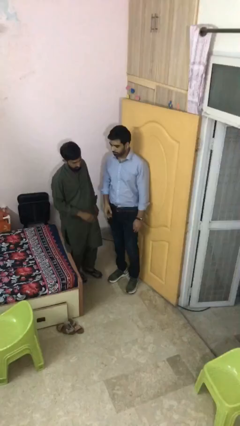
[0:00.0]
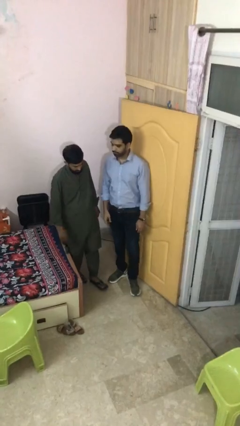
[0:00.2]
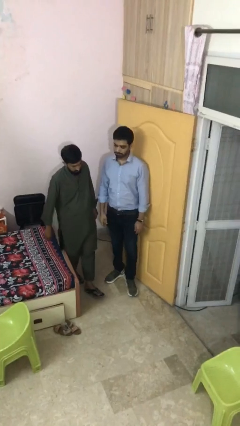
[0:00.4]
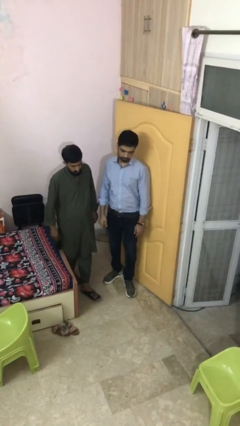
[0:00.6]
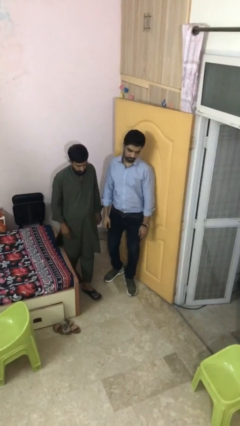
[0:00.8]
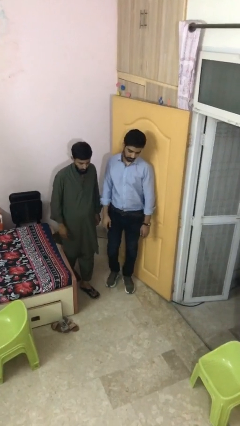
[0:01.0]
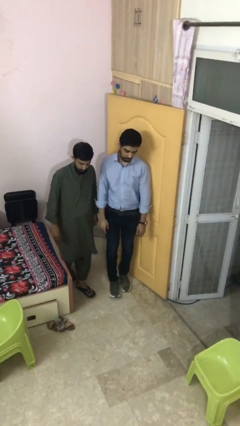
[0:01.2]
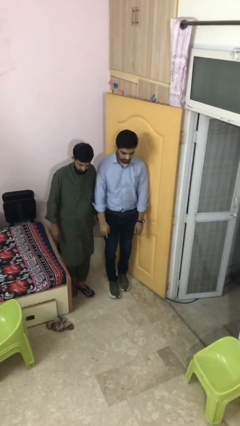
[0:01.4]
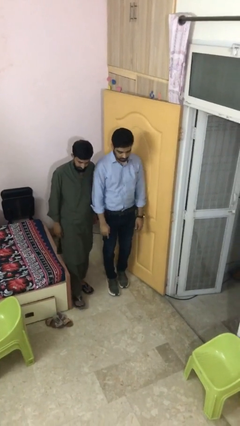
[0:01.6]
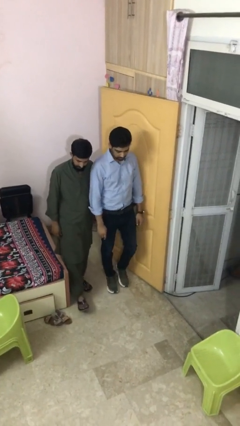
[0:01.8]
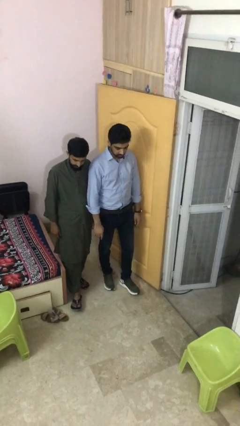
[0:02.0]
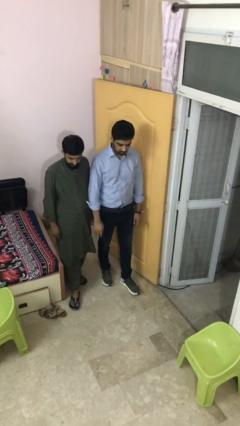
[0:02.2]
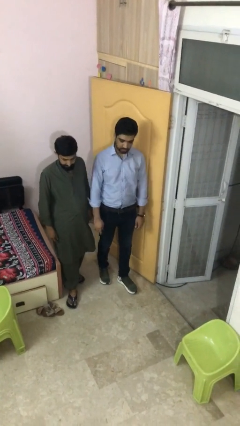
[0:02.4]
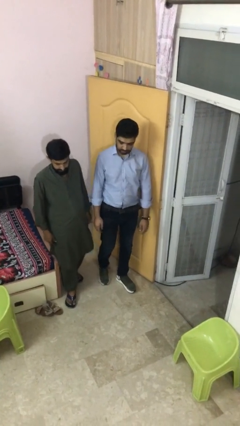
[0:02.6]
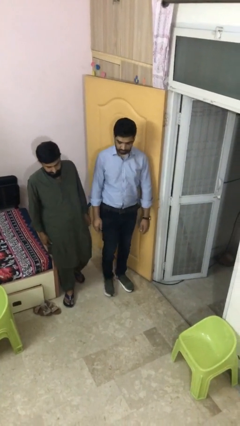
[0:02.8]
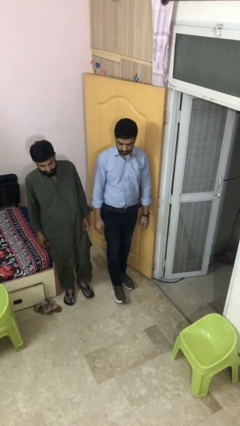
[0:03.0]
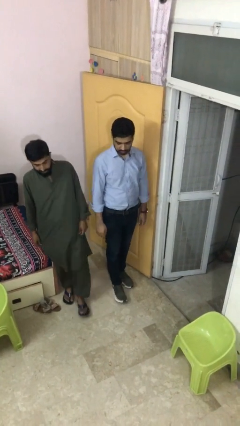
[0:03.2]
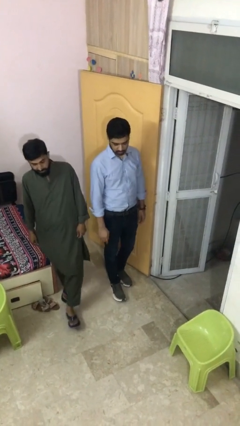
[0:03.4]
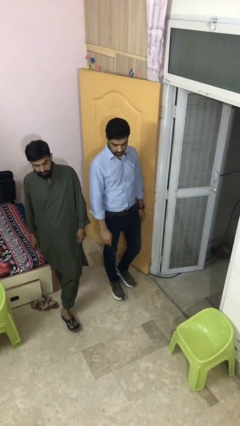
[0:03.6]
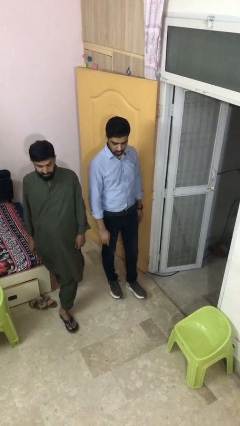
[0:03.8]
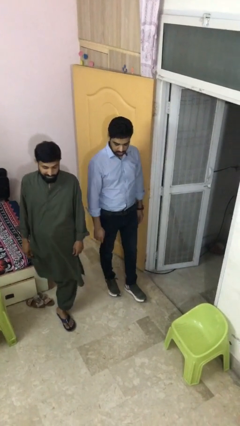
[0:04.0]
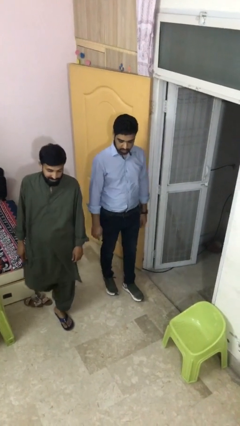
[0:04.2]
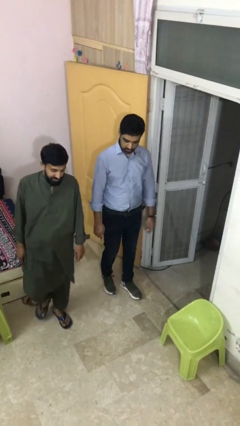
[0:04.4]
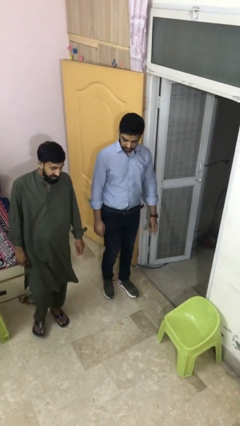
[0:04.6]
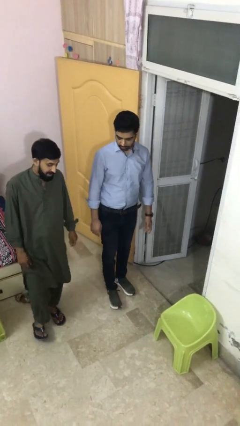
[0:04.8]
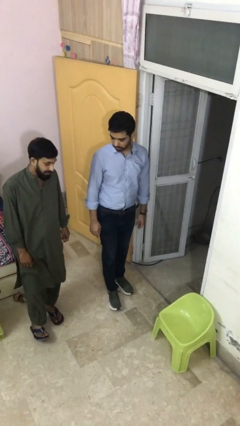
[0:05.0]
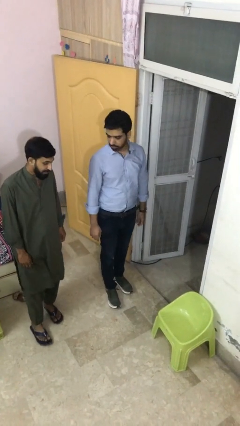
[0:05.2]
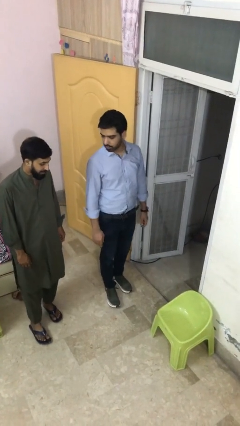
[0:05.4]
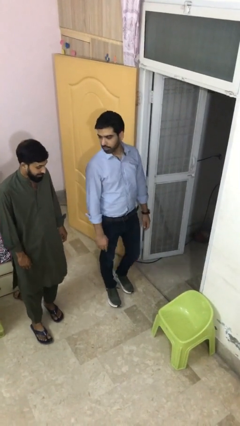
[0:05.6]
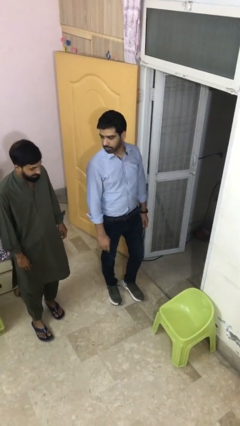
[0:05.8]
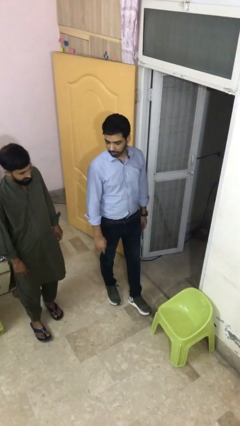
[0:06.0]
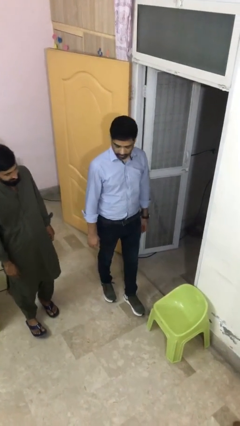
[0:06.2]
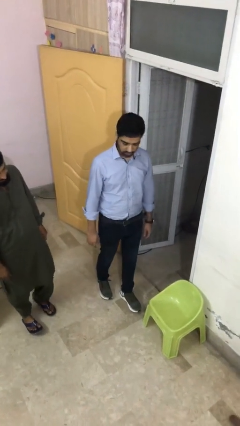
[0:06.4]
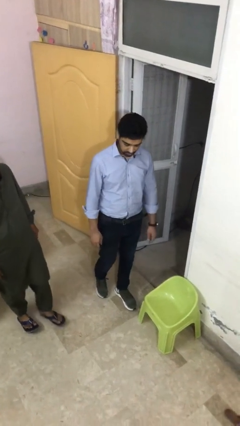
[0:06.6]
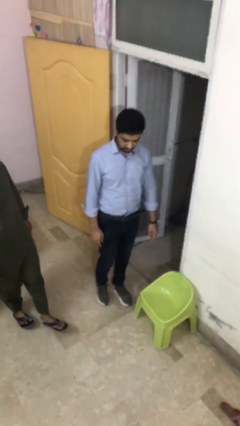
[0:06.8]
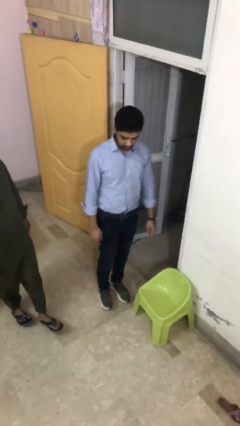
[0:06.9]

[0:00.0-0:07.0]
person talks to person

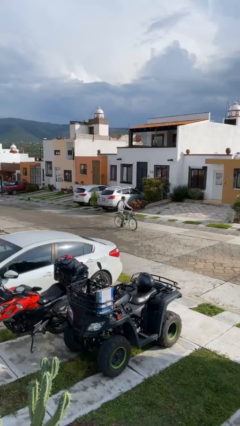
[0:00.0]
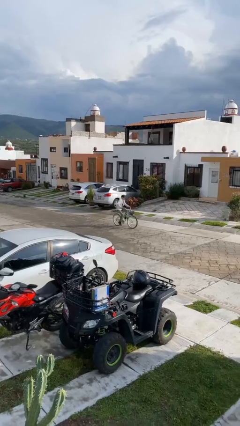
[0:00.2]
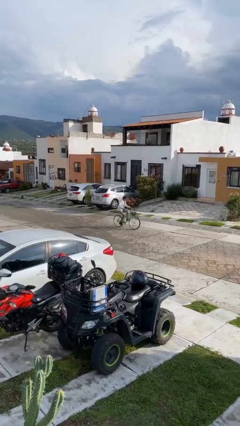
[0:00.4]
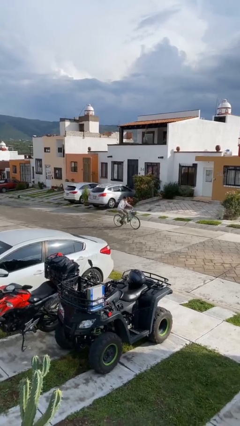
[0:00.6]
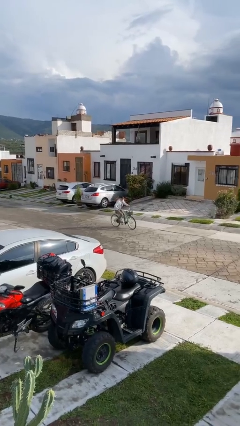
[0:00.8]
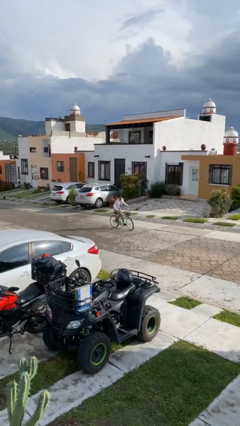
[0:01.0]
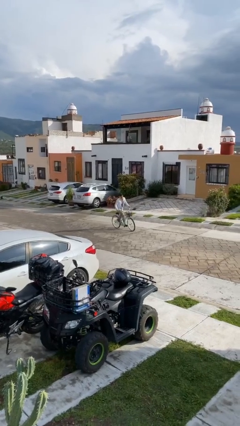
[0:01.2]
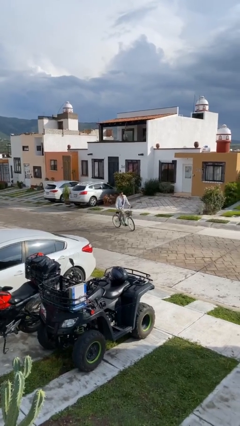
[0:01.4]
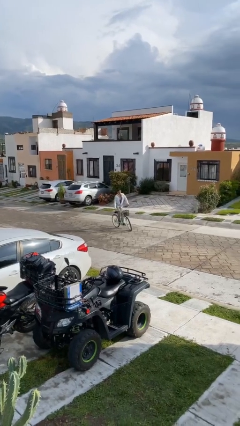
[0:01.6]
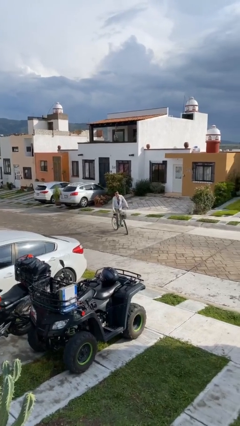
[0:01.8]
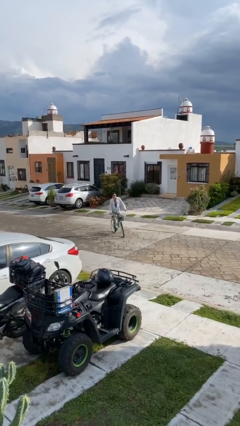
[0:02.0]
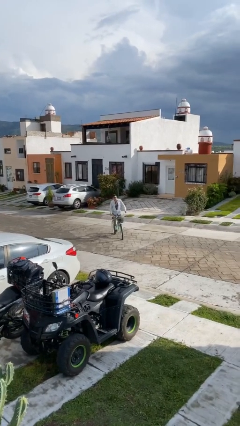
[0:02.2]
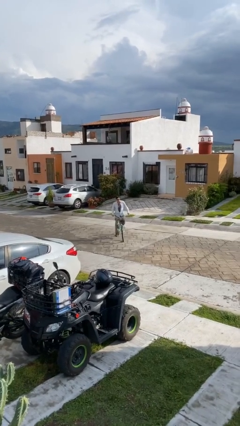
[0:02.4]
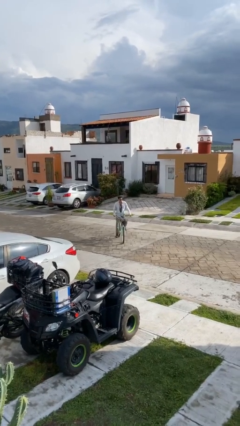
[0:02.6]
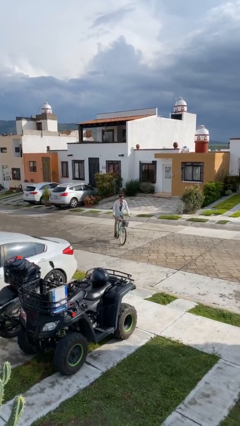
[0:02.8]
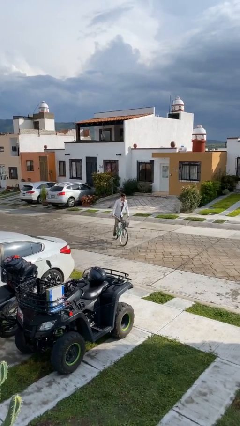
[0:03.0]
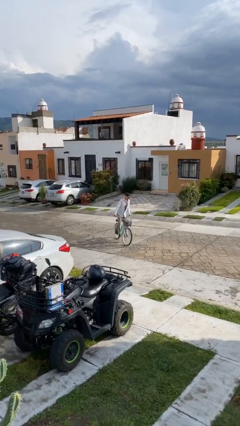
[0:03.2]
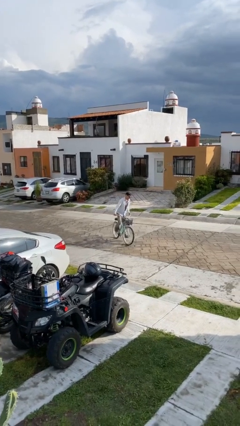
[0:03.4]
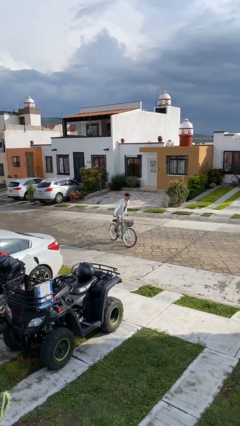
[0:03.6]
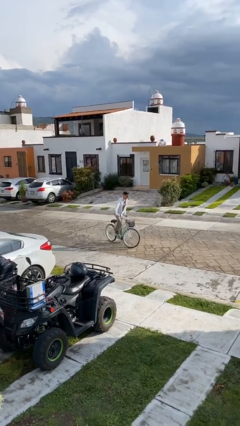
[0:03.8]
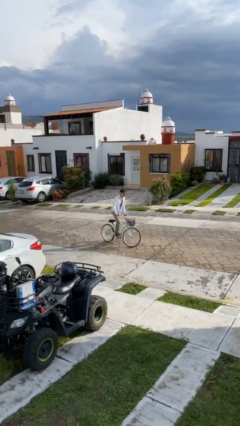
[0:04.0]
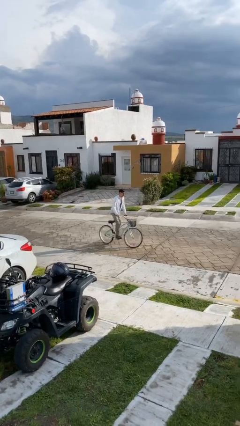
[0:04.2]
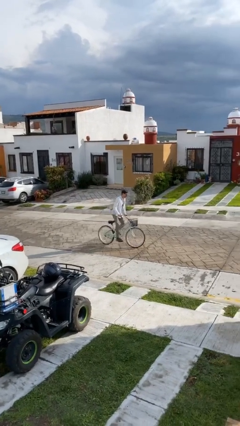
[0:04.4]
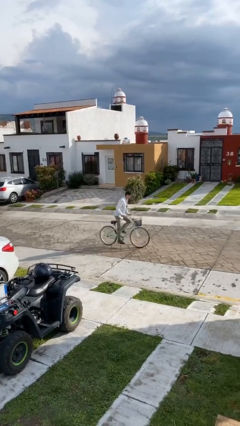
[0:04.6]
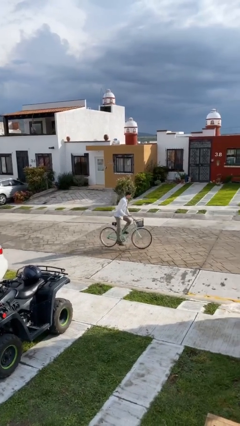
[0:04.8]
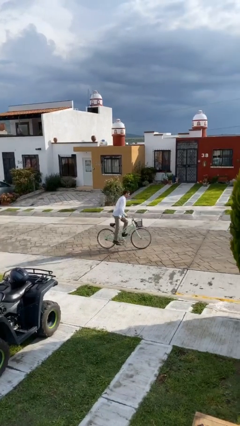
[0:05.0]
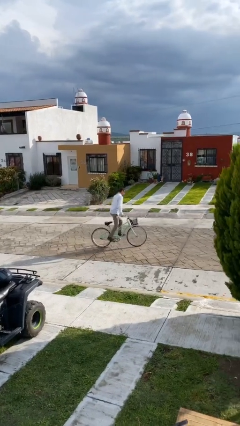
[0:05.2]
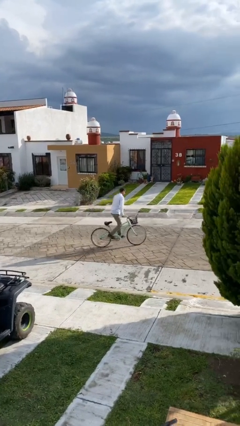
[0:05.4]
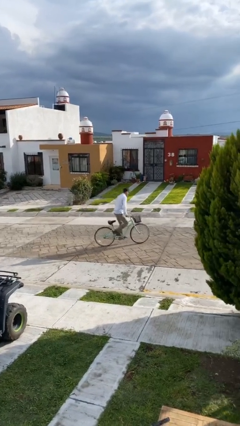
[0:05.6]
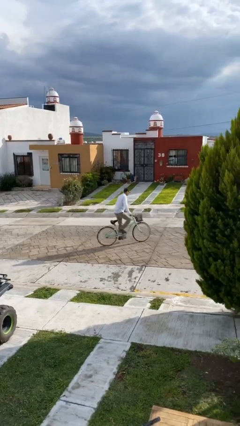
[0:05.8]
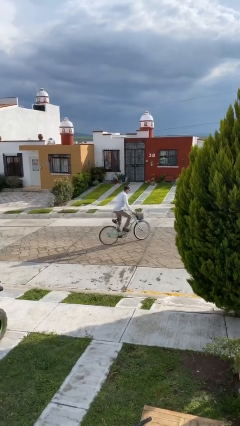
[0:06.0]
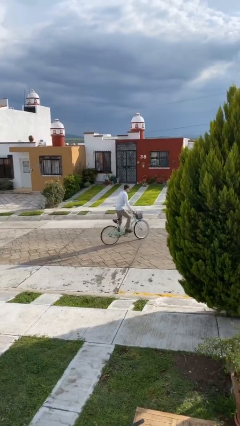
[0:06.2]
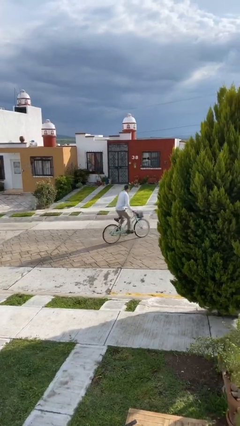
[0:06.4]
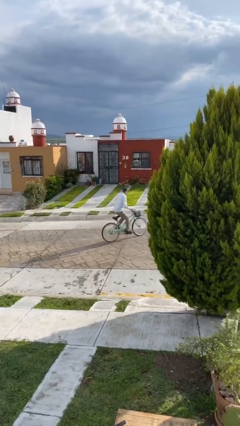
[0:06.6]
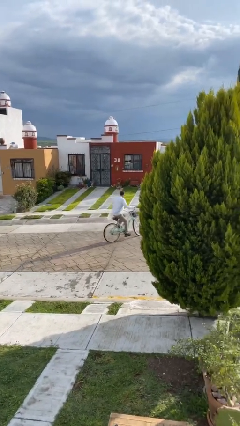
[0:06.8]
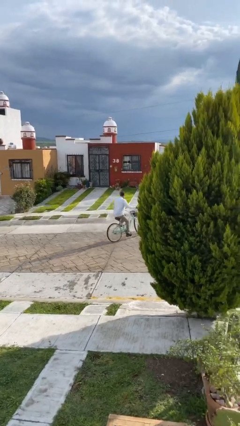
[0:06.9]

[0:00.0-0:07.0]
person rides bicycle

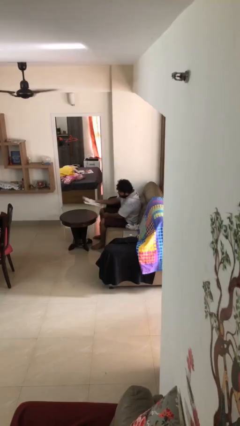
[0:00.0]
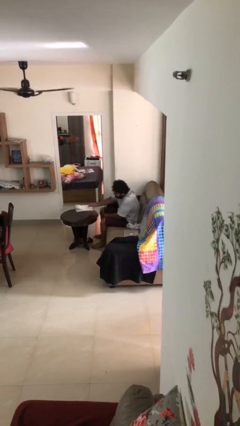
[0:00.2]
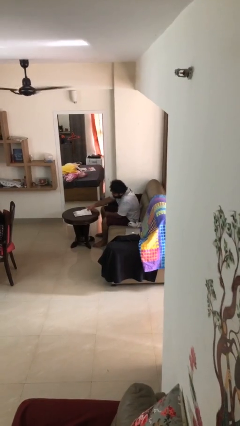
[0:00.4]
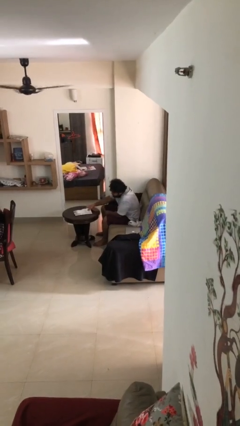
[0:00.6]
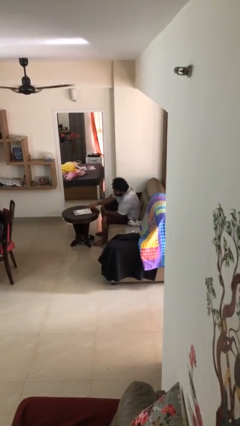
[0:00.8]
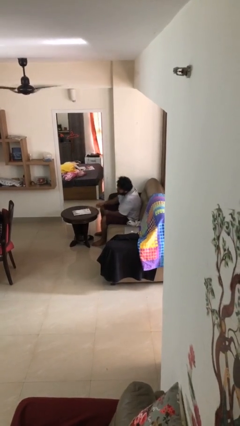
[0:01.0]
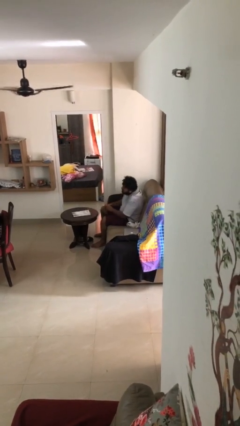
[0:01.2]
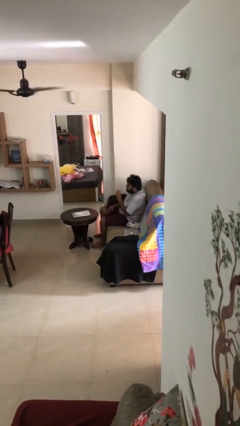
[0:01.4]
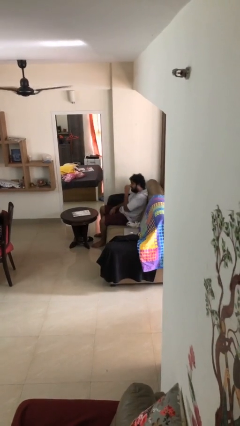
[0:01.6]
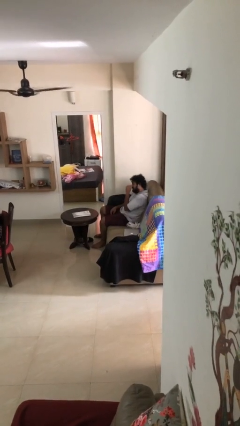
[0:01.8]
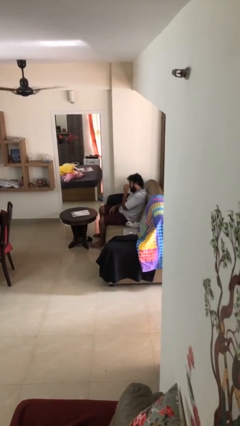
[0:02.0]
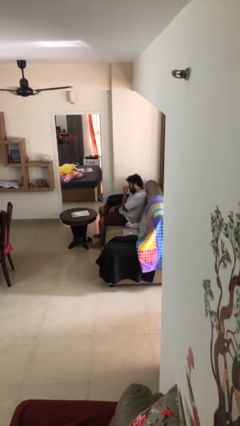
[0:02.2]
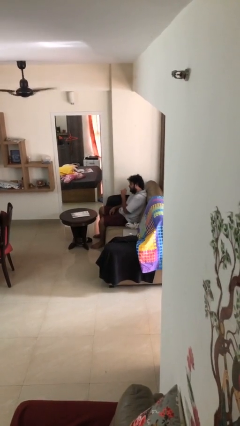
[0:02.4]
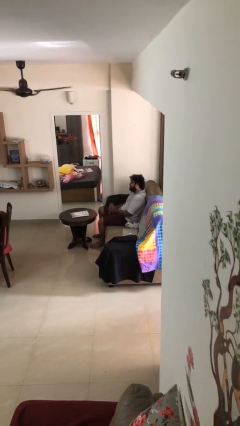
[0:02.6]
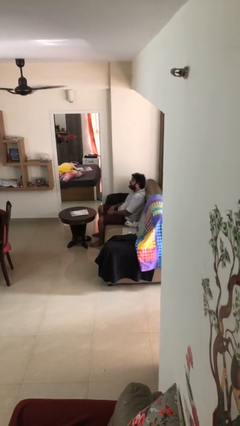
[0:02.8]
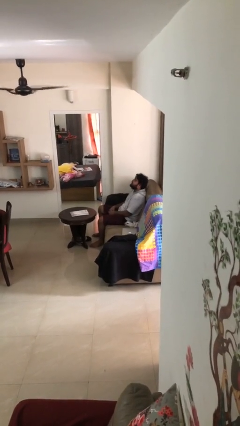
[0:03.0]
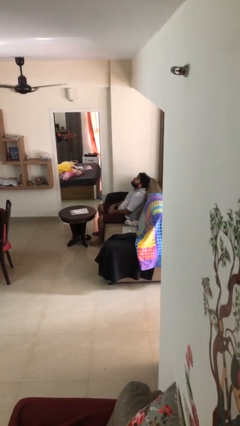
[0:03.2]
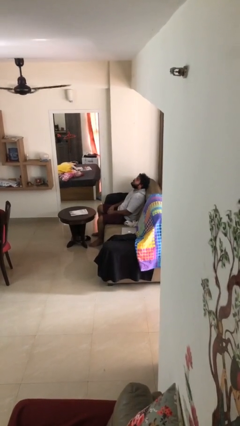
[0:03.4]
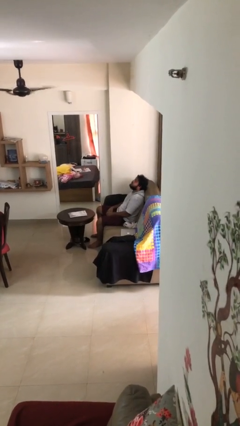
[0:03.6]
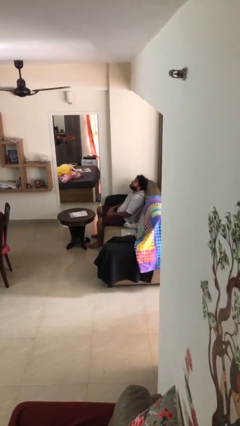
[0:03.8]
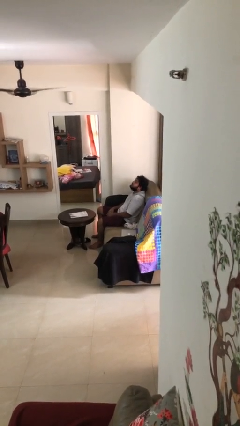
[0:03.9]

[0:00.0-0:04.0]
person puts down object on table
